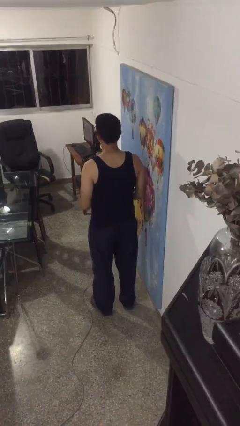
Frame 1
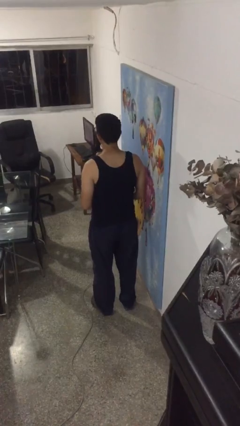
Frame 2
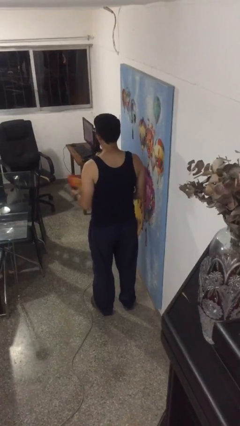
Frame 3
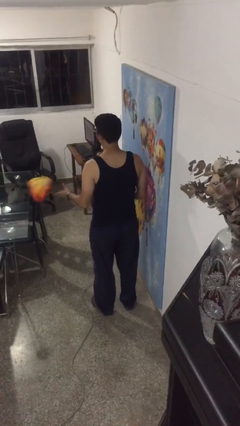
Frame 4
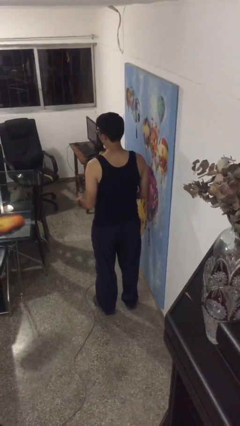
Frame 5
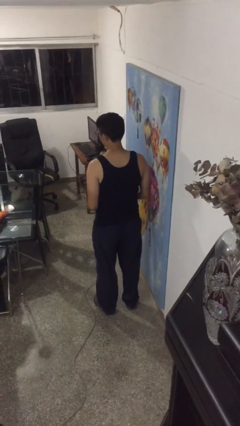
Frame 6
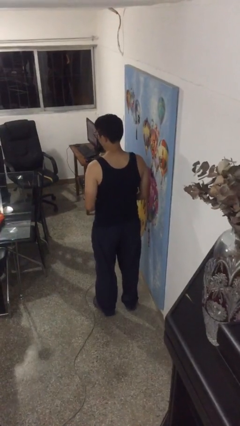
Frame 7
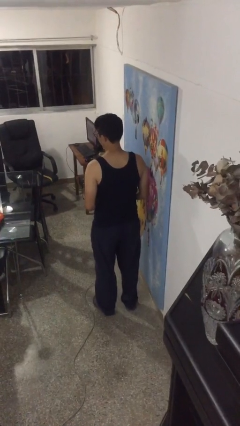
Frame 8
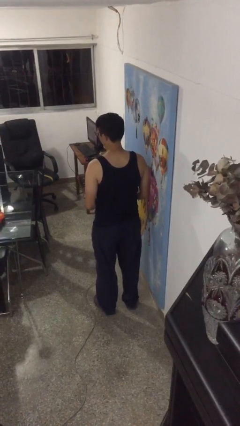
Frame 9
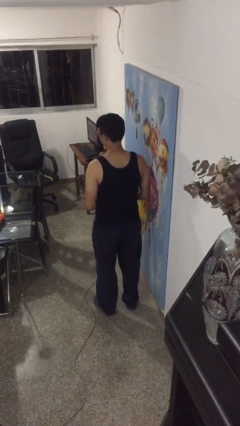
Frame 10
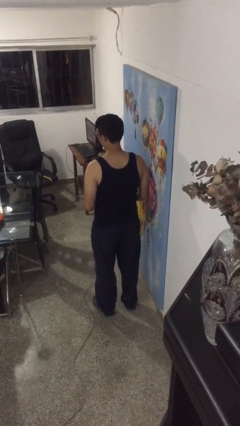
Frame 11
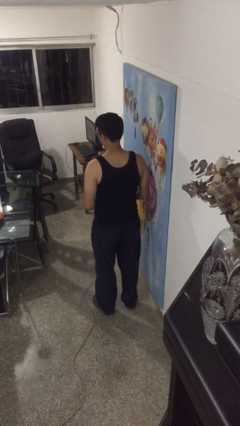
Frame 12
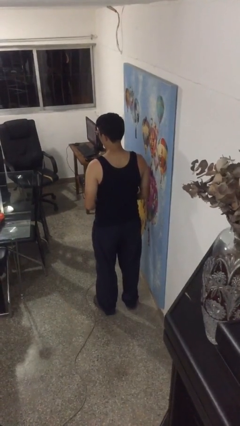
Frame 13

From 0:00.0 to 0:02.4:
person throws object on table

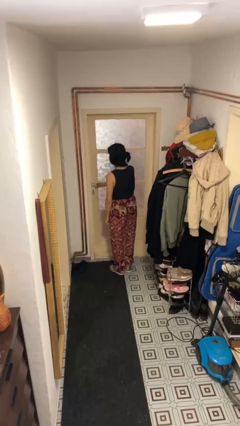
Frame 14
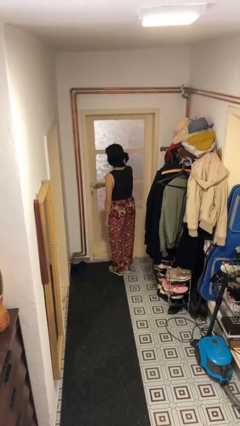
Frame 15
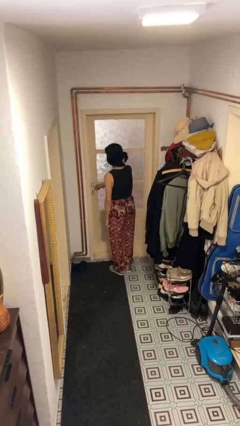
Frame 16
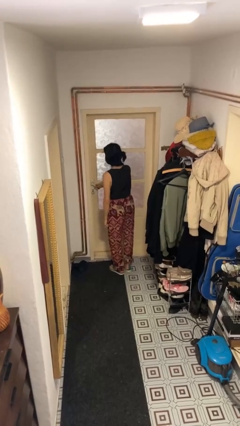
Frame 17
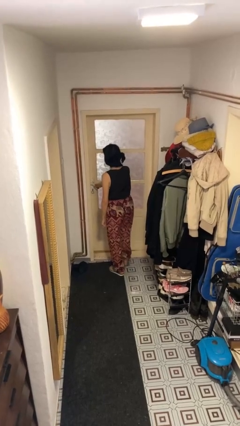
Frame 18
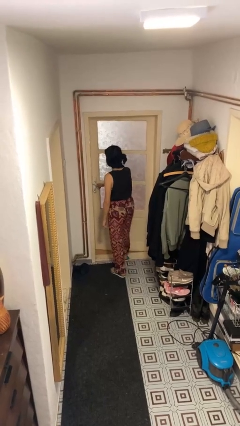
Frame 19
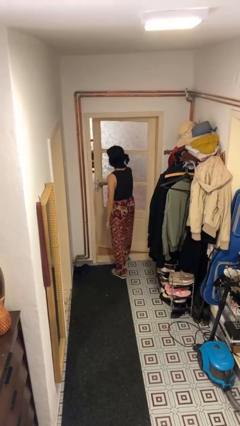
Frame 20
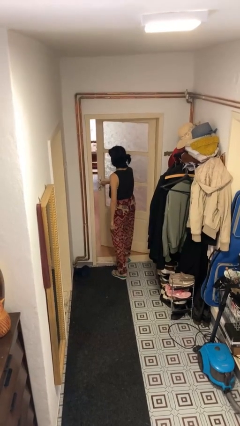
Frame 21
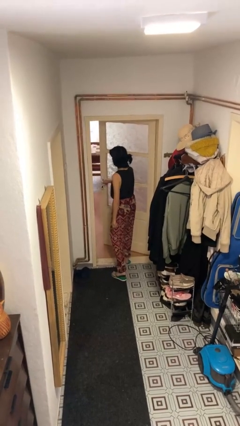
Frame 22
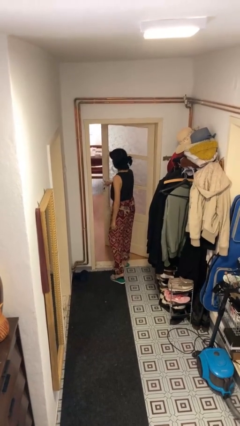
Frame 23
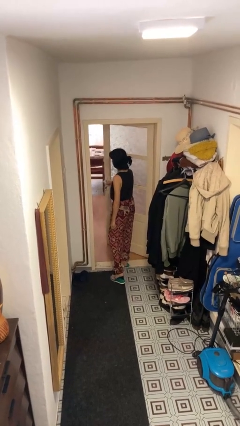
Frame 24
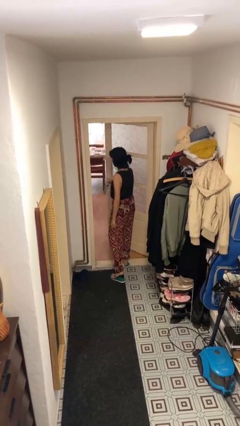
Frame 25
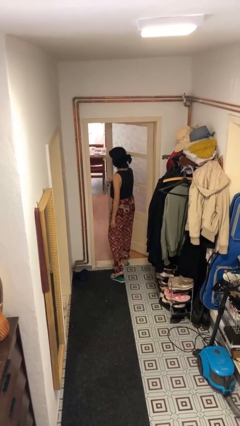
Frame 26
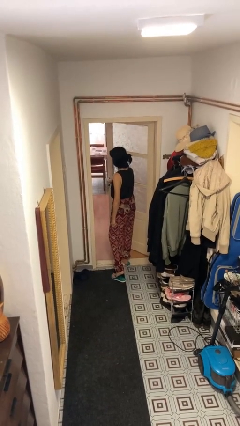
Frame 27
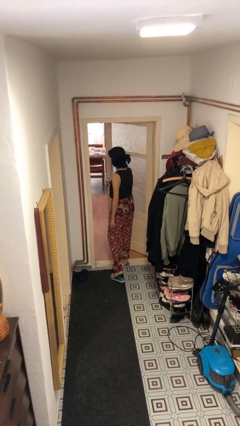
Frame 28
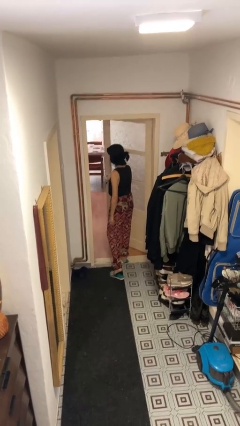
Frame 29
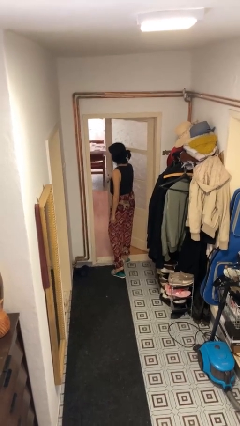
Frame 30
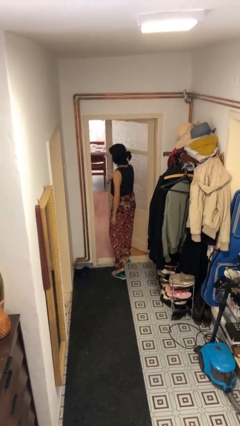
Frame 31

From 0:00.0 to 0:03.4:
person opens facility door

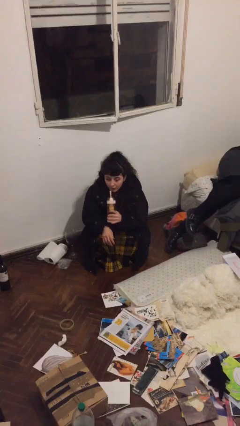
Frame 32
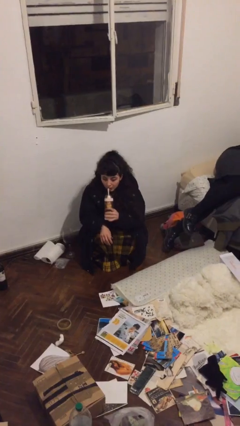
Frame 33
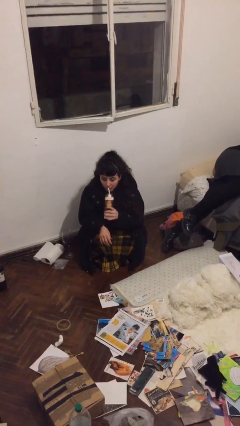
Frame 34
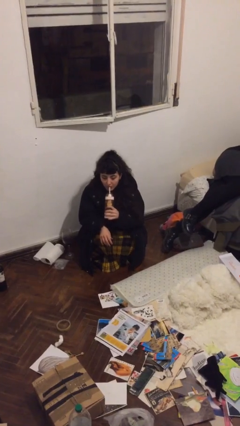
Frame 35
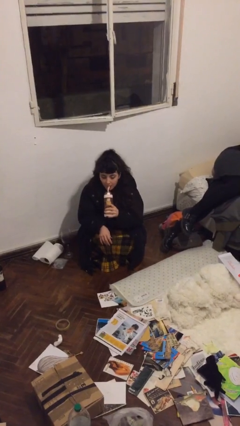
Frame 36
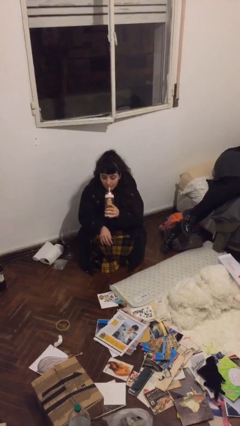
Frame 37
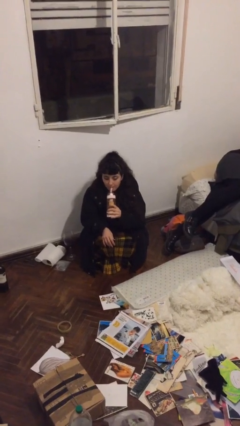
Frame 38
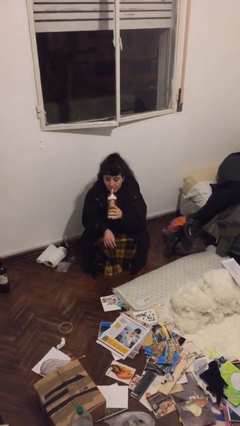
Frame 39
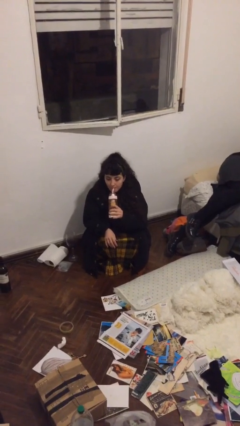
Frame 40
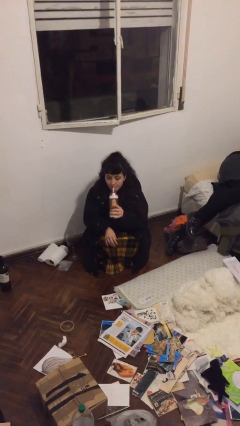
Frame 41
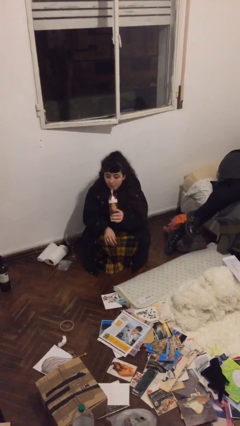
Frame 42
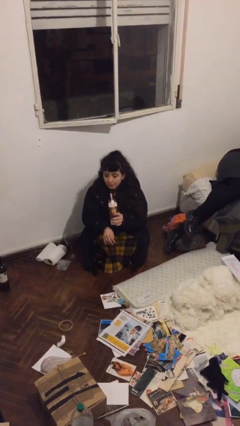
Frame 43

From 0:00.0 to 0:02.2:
person drinks from straw

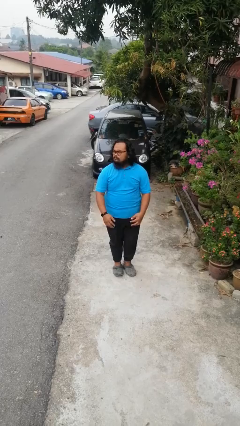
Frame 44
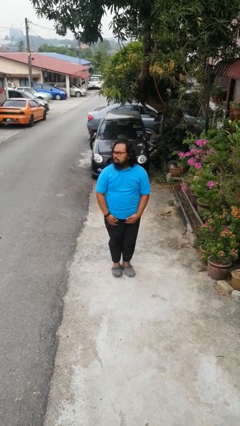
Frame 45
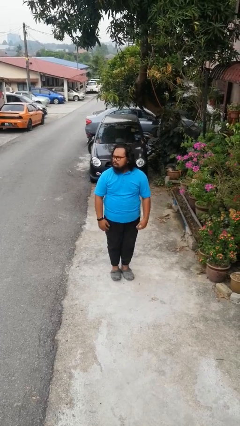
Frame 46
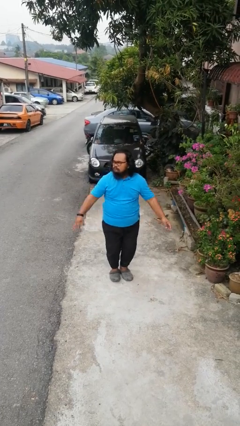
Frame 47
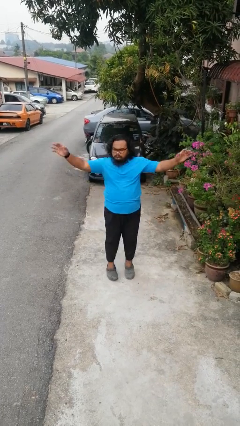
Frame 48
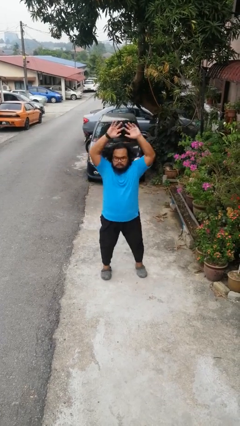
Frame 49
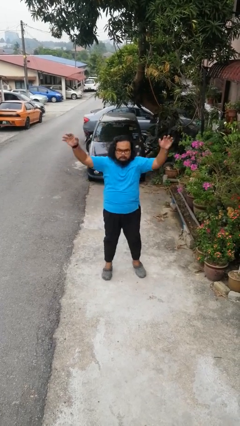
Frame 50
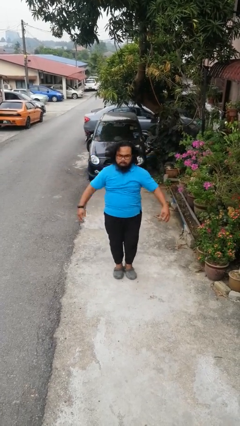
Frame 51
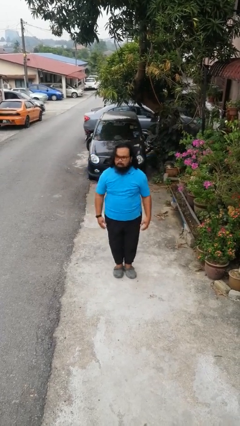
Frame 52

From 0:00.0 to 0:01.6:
person exercises with jumping jacks

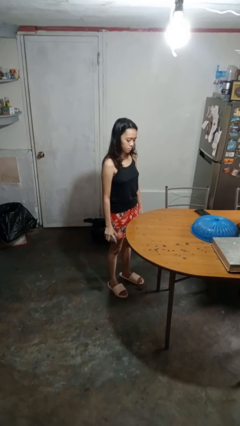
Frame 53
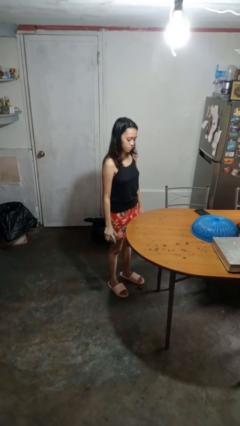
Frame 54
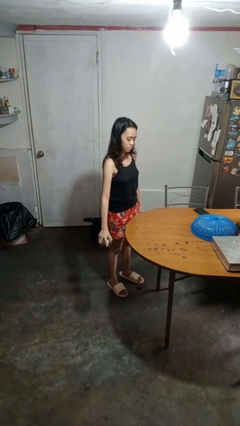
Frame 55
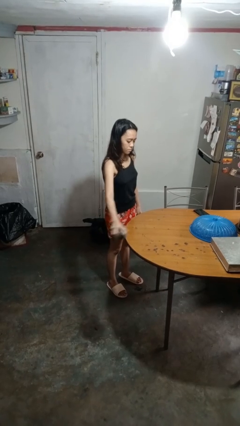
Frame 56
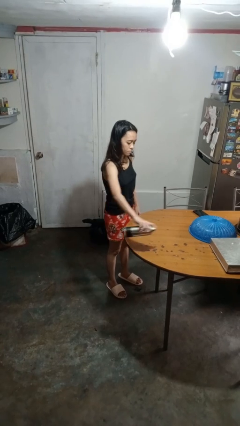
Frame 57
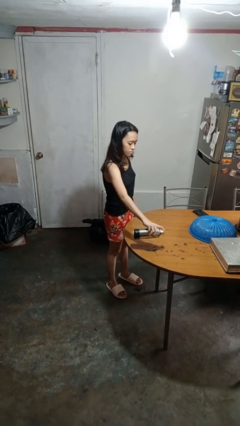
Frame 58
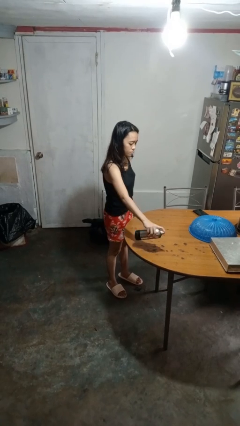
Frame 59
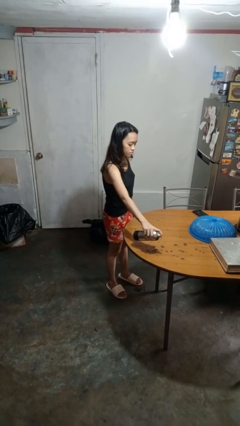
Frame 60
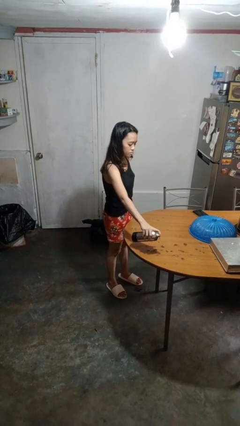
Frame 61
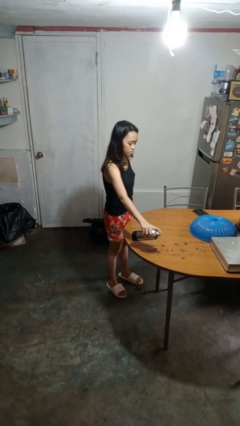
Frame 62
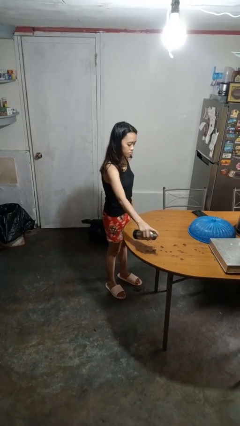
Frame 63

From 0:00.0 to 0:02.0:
person sprays from bottle

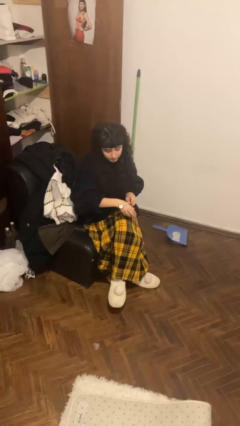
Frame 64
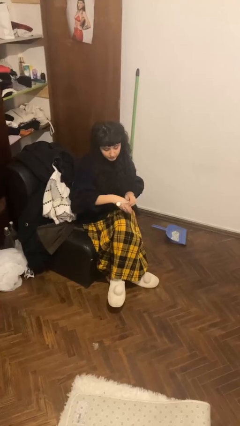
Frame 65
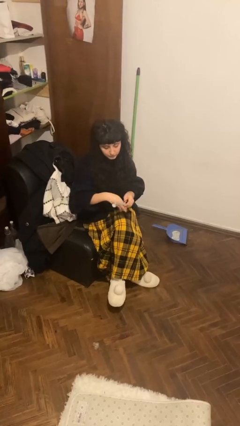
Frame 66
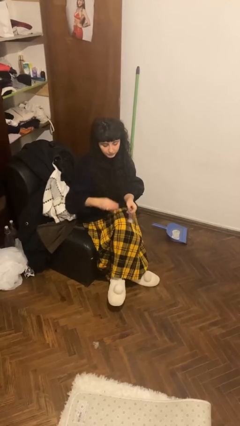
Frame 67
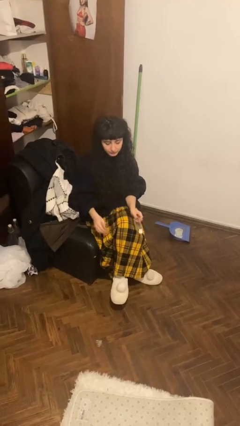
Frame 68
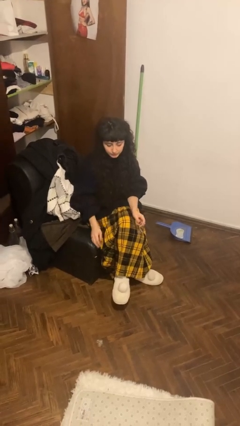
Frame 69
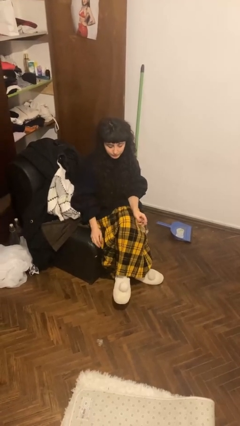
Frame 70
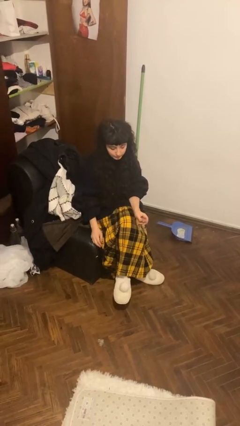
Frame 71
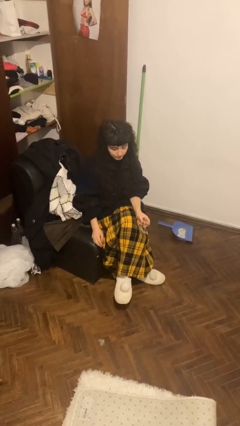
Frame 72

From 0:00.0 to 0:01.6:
person takes off wristwatch

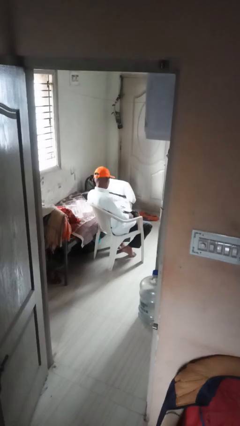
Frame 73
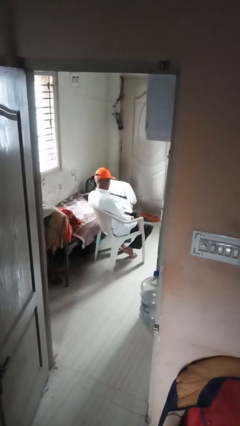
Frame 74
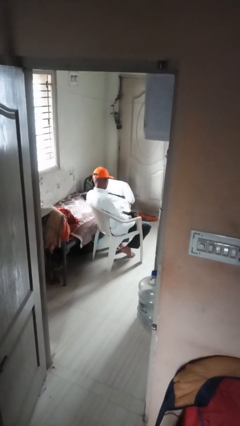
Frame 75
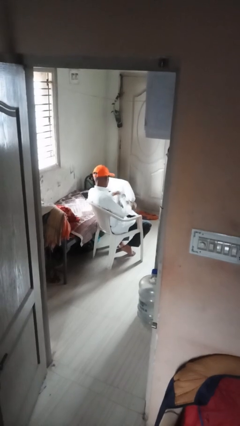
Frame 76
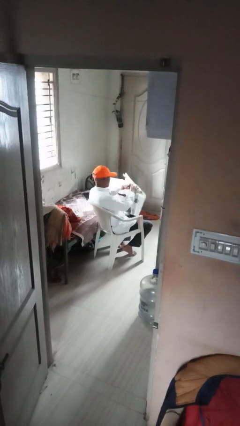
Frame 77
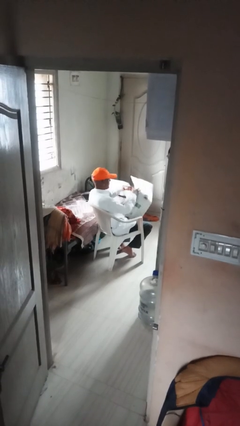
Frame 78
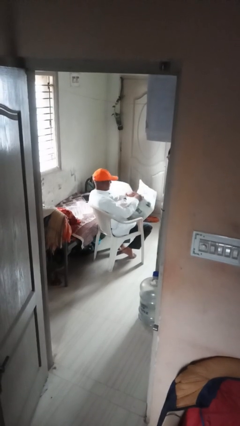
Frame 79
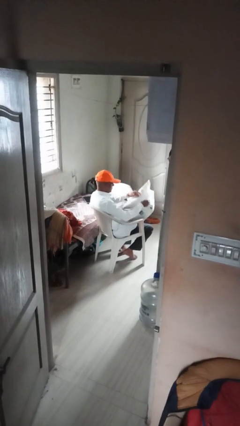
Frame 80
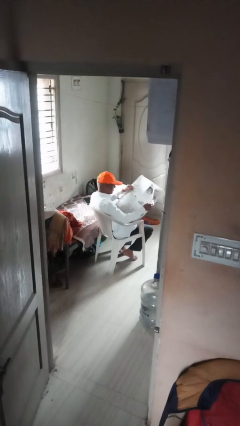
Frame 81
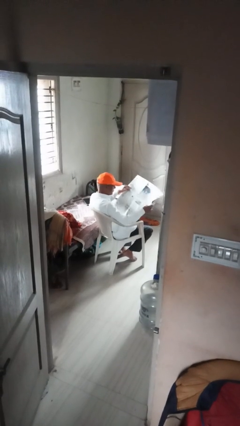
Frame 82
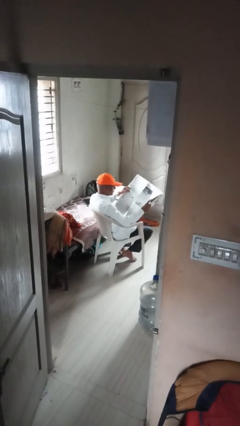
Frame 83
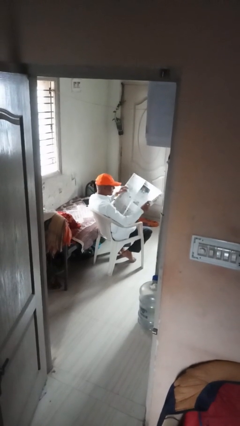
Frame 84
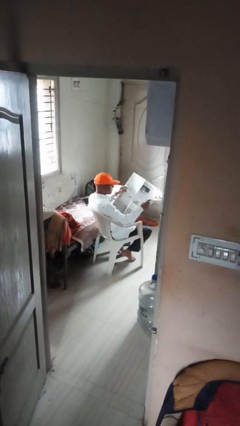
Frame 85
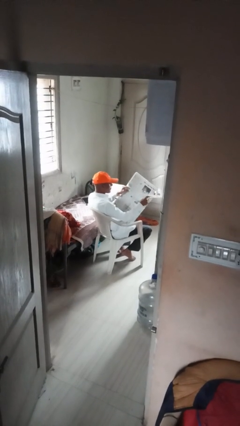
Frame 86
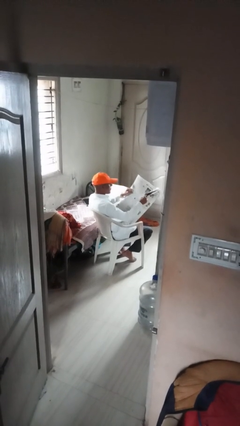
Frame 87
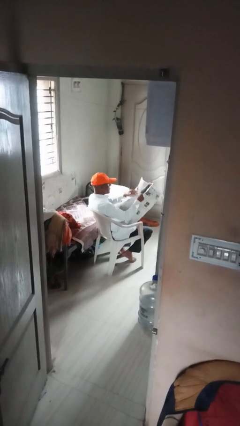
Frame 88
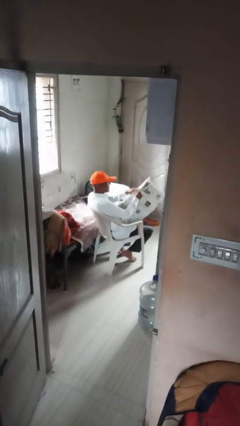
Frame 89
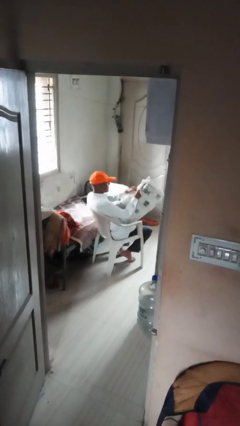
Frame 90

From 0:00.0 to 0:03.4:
person reads newspaper
